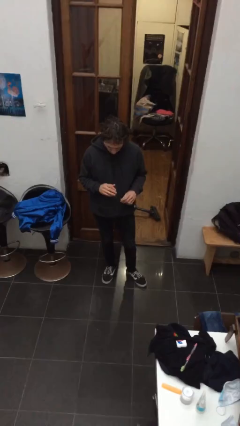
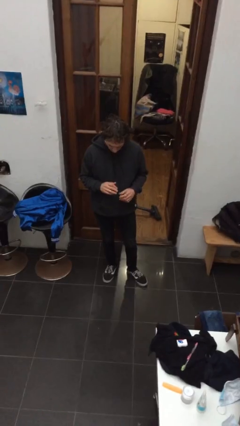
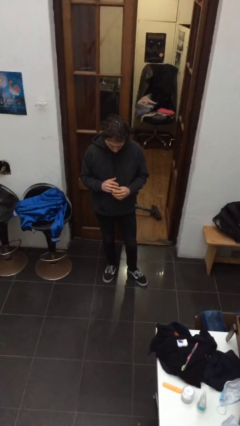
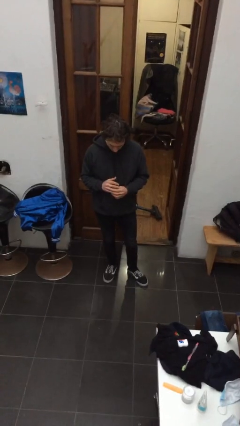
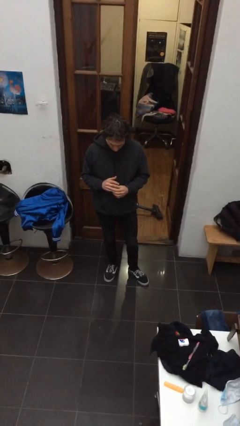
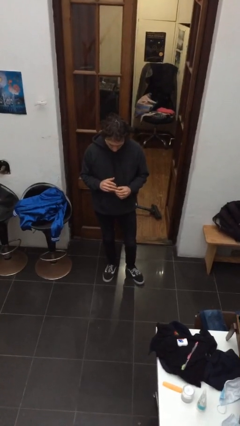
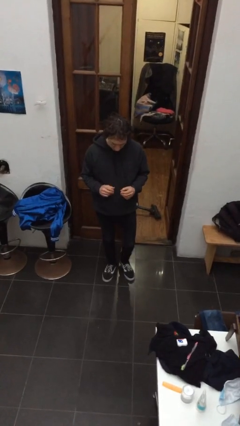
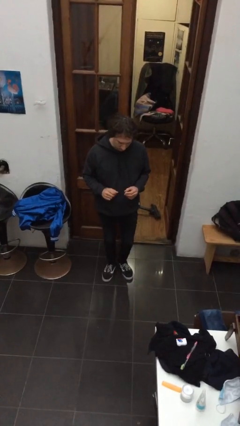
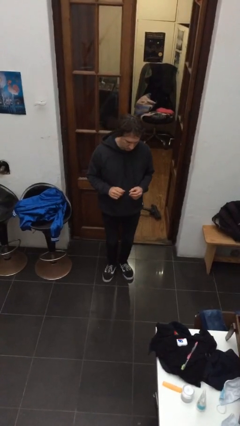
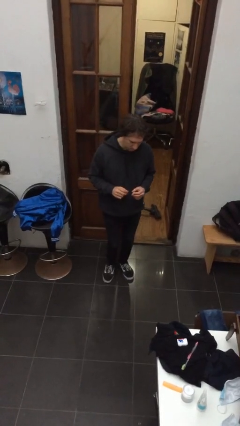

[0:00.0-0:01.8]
person takes off ring

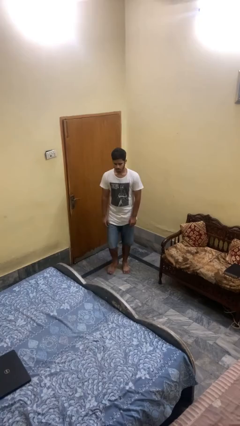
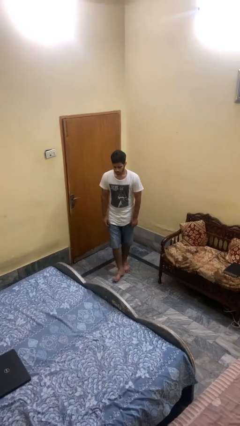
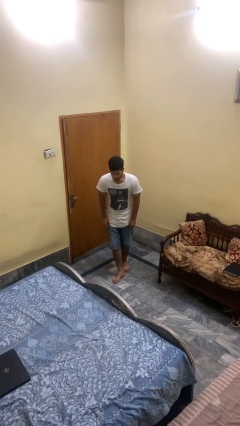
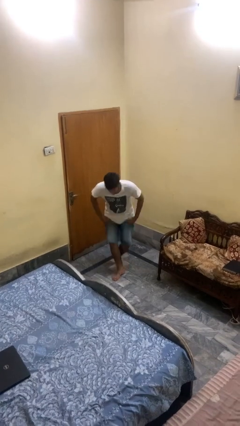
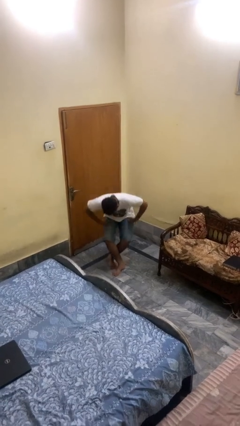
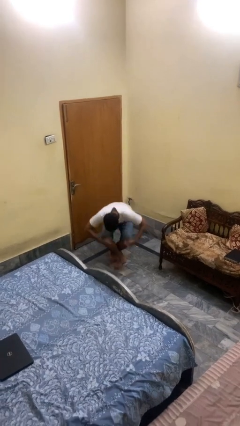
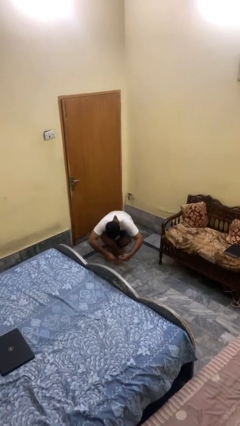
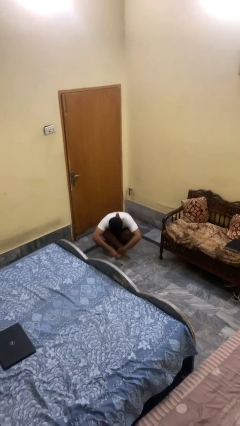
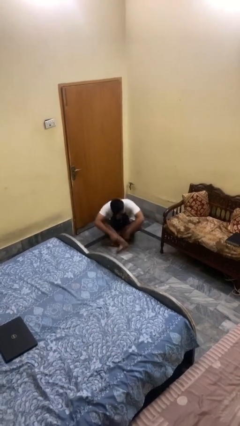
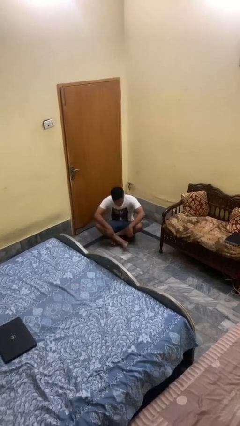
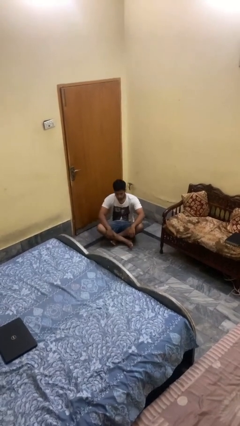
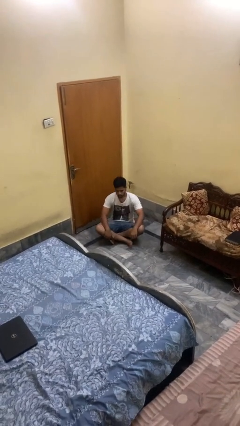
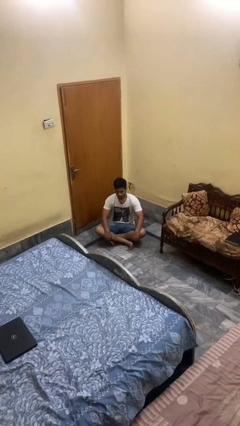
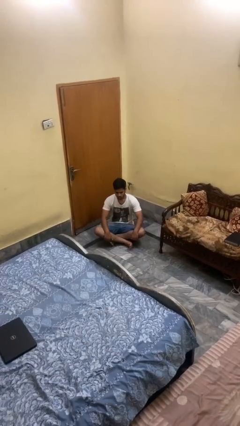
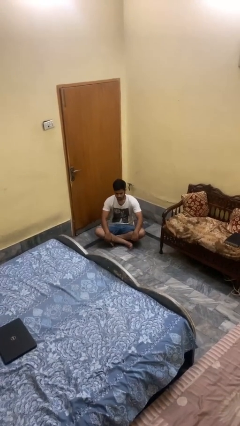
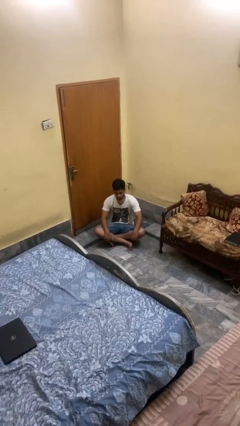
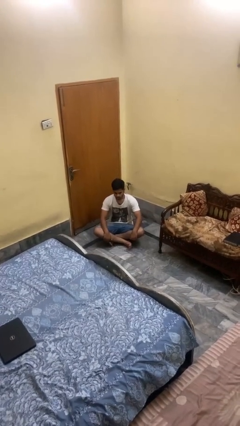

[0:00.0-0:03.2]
person sits crisscross

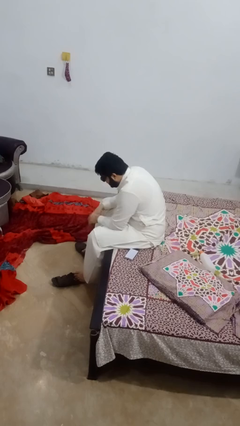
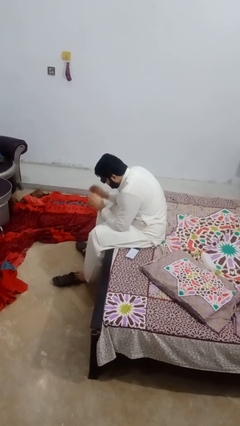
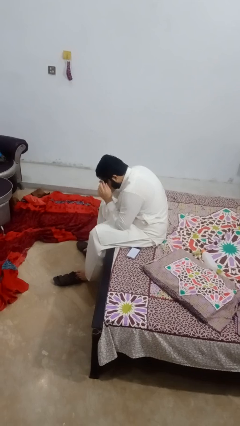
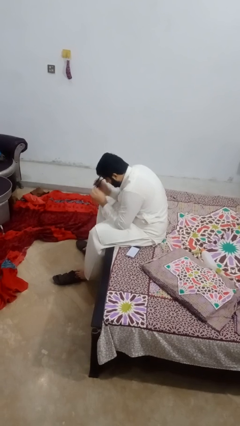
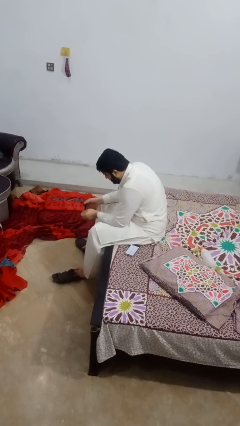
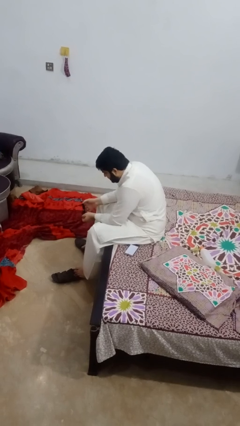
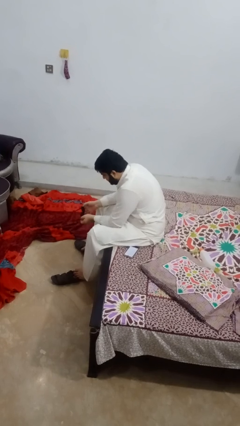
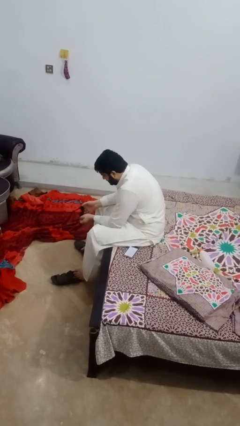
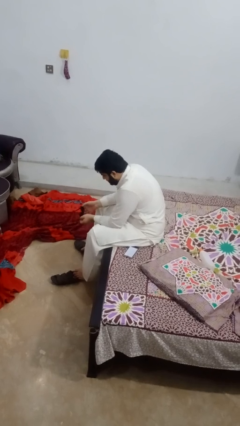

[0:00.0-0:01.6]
person takes off glasses

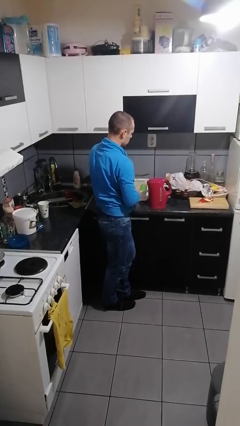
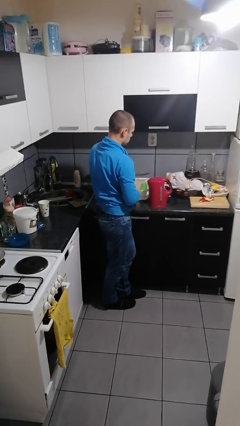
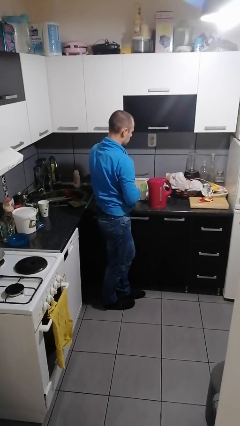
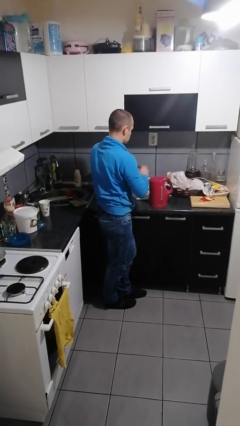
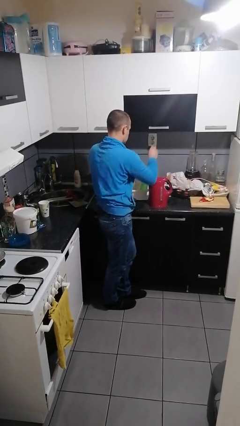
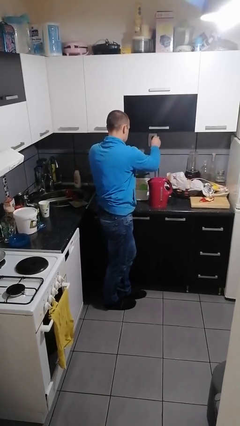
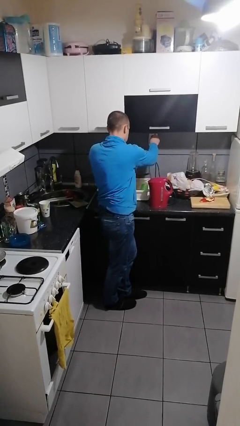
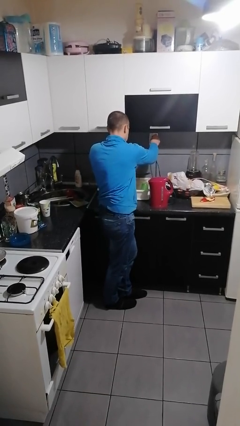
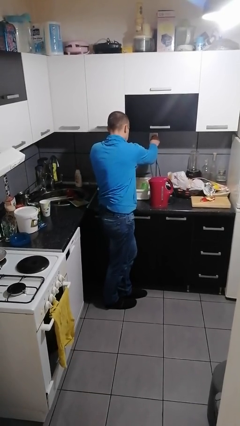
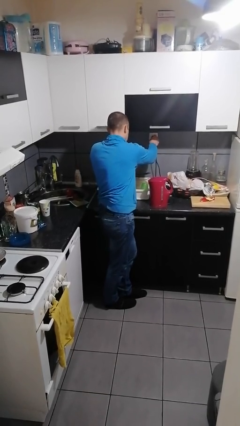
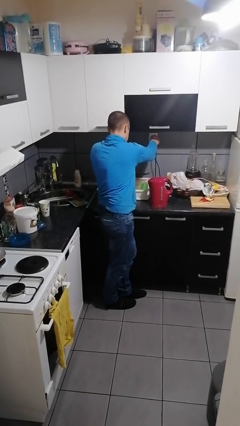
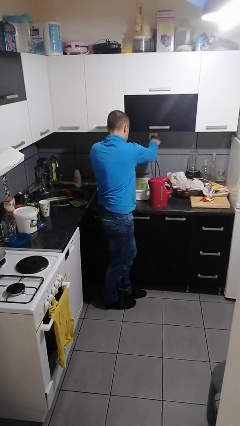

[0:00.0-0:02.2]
person plugs into electrical socket

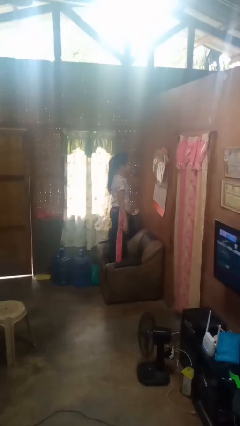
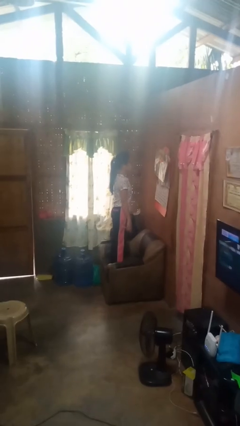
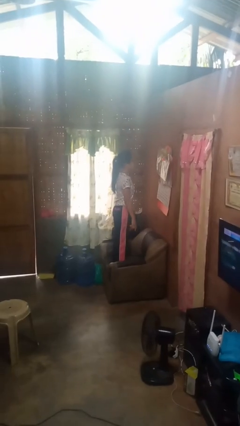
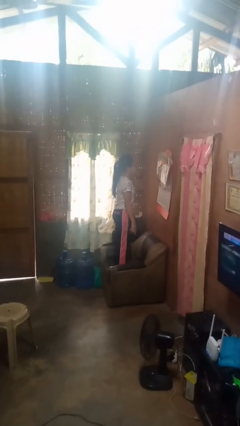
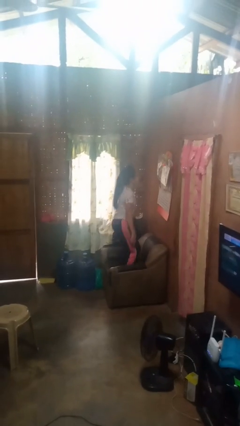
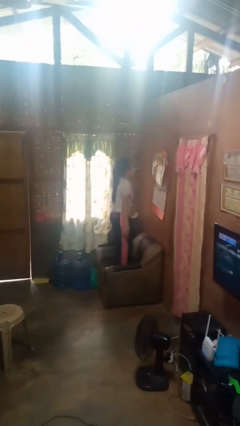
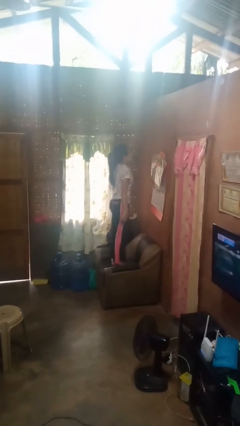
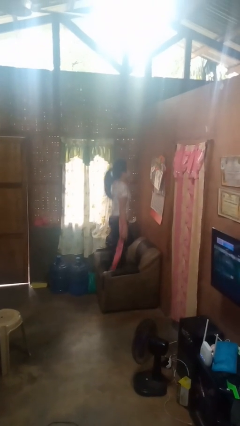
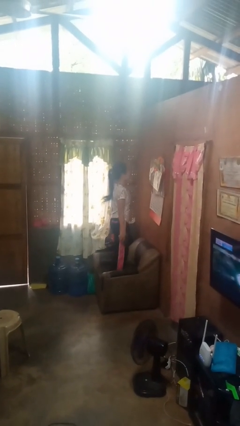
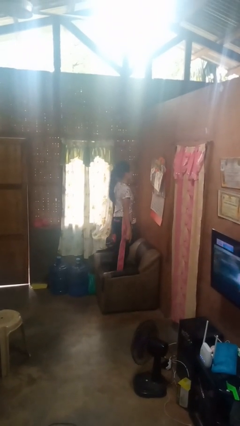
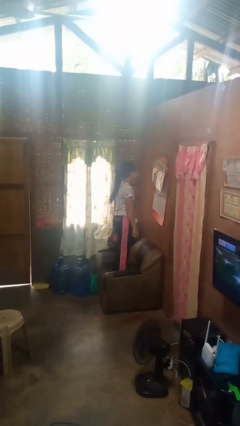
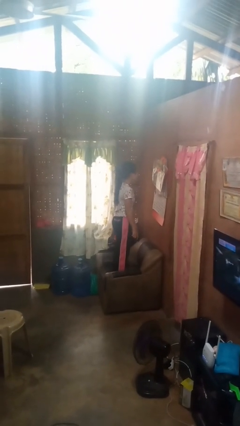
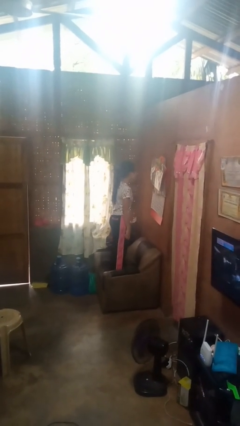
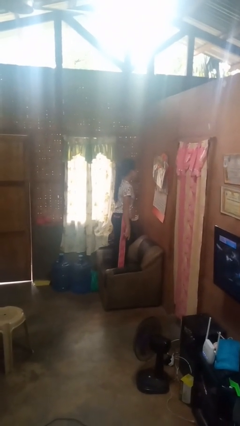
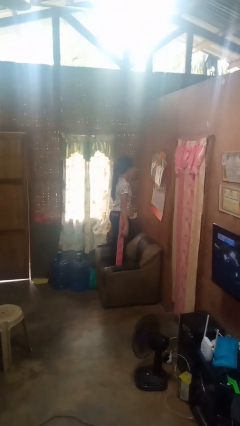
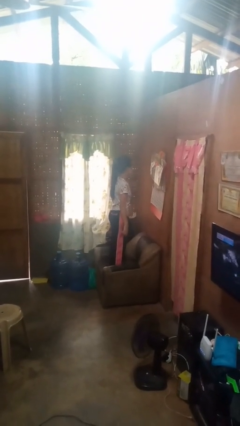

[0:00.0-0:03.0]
person jumps on couch

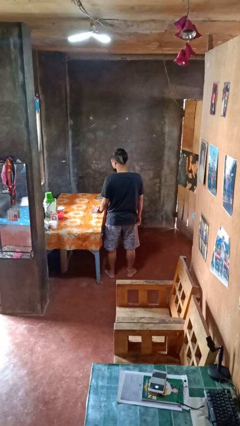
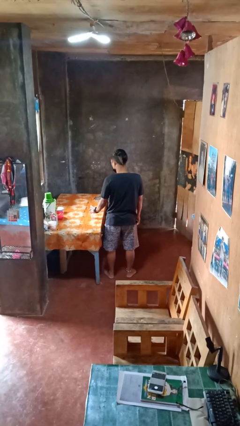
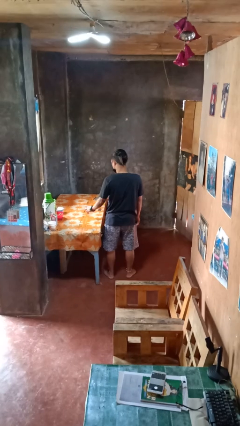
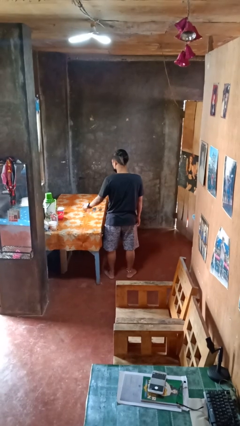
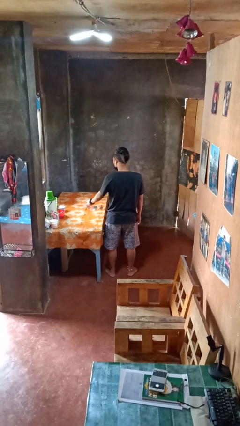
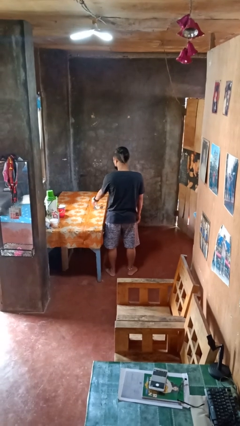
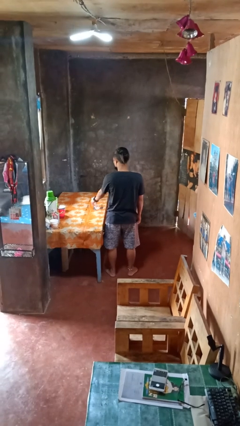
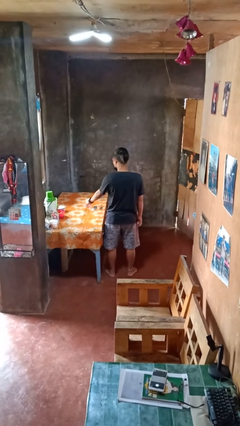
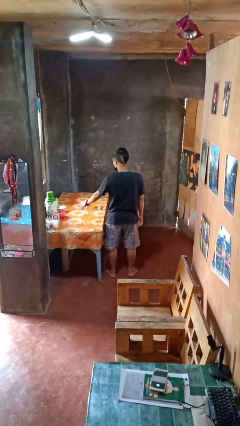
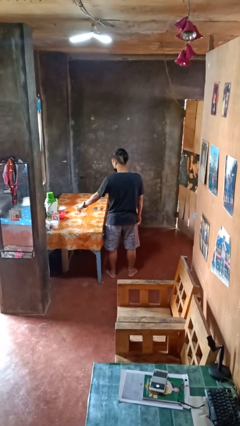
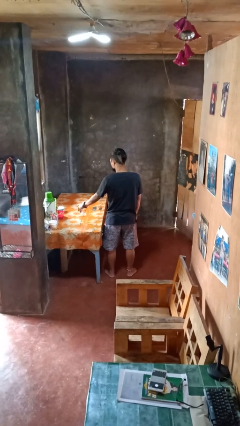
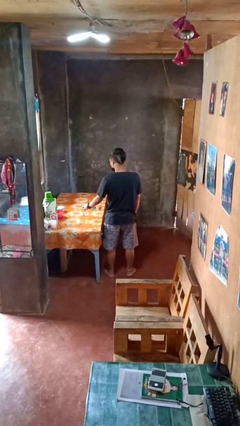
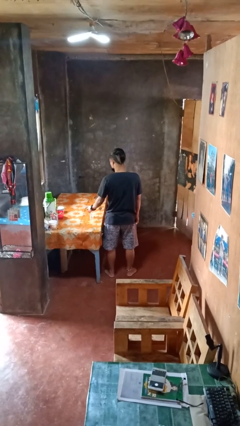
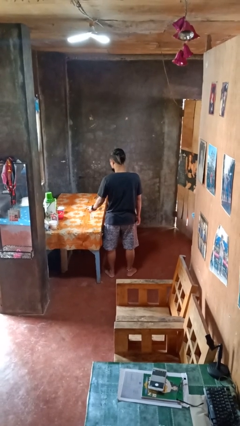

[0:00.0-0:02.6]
person sprays from bottle

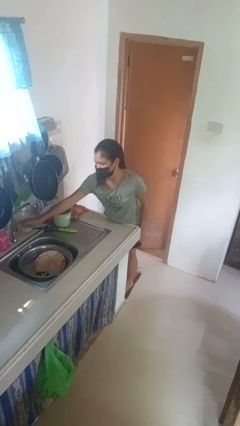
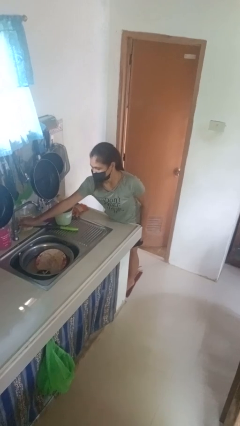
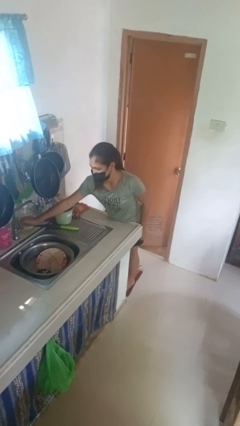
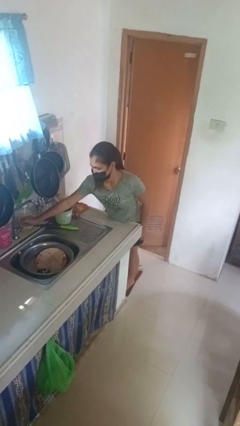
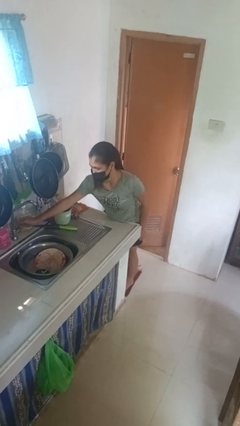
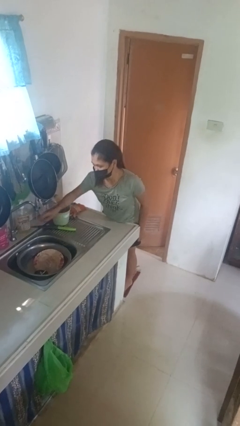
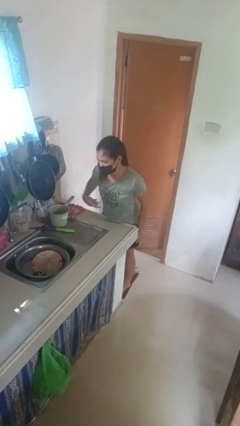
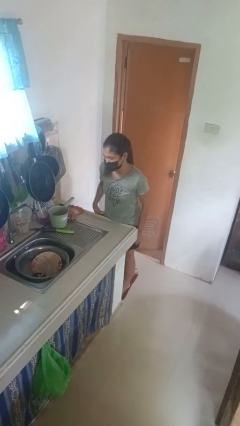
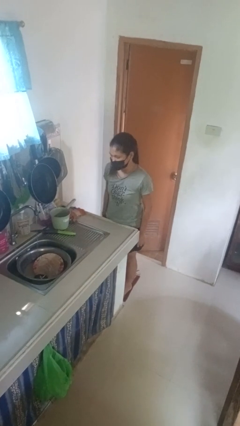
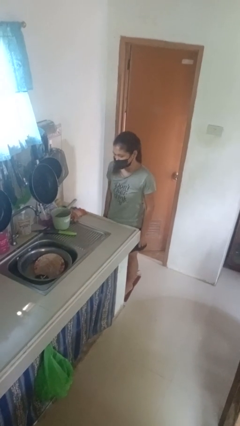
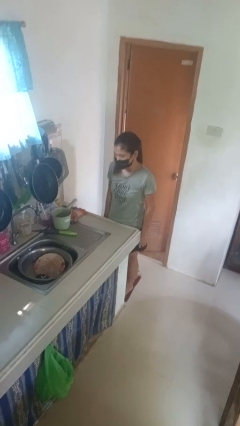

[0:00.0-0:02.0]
person turns on faucet

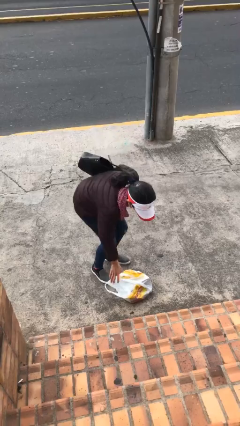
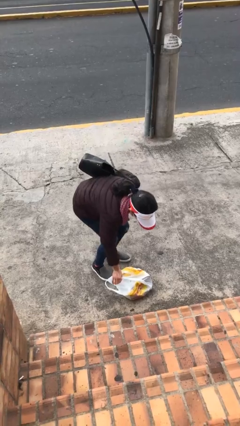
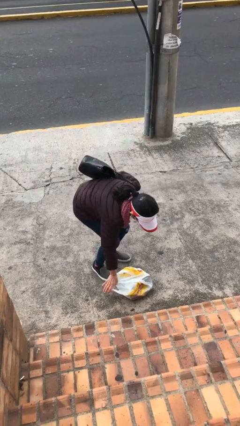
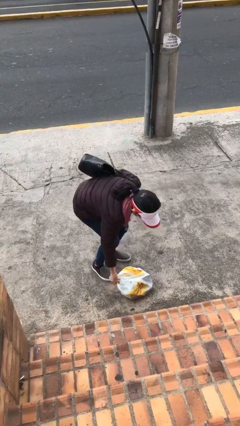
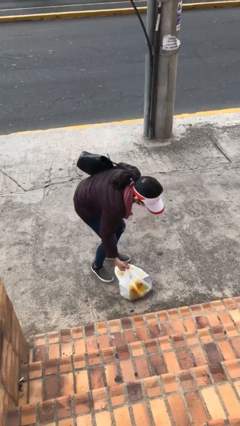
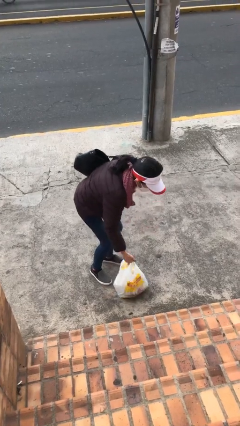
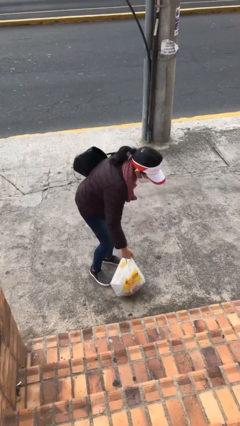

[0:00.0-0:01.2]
person picks up object from floor
